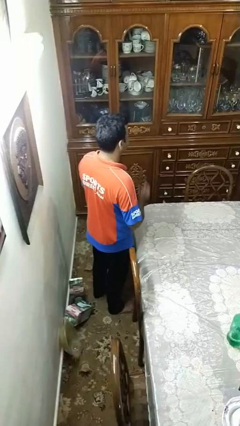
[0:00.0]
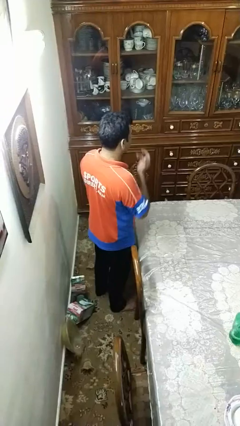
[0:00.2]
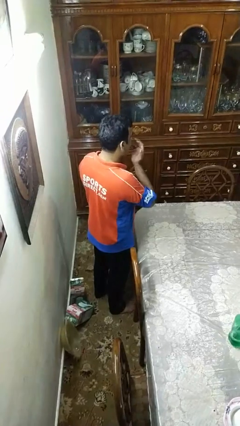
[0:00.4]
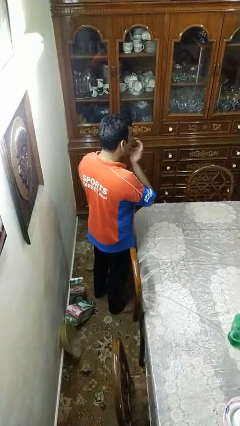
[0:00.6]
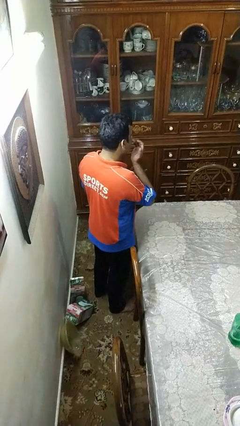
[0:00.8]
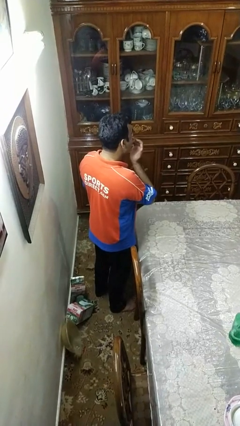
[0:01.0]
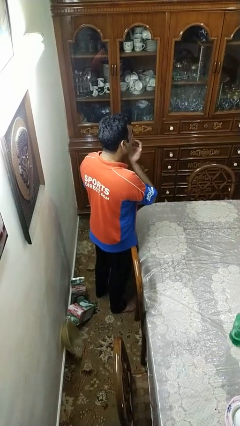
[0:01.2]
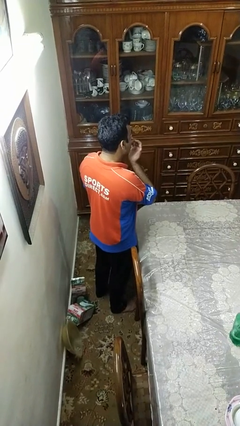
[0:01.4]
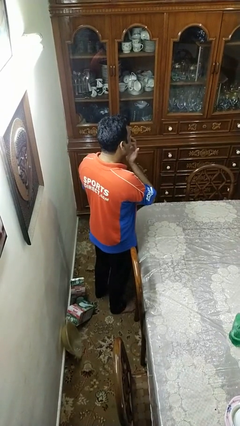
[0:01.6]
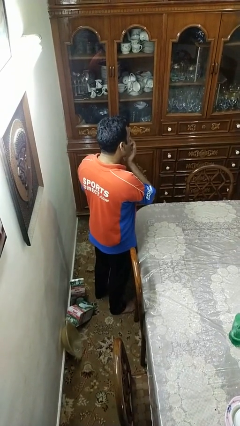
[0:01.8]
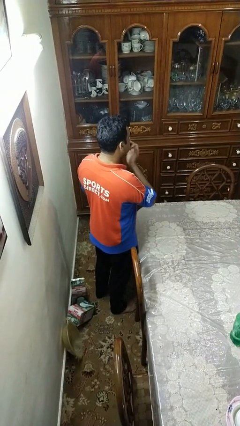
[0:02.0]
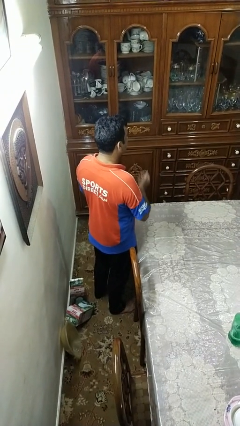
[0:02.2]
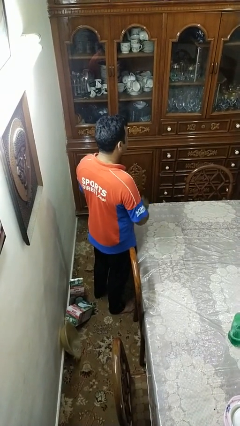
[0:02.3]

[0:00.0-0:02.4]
person licks fingers

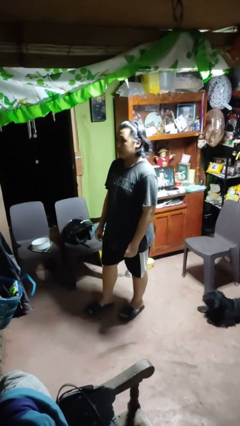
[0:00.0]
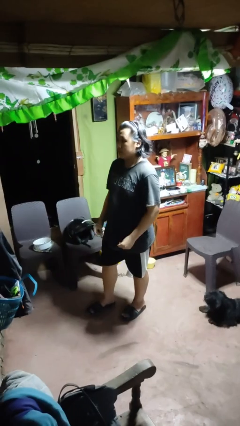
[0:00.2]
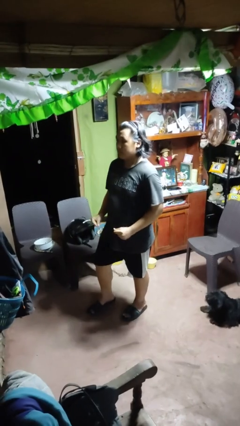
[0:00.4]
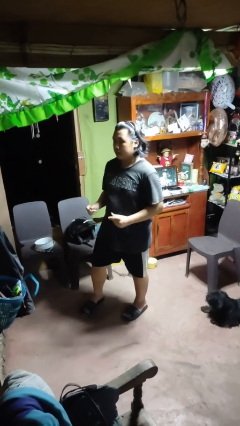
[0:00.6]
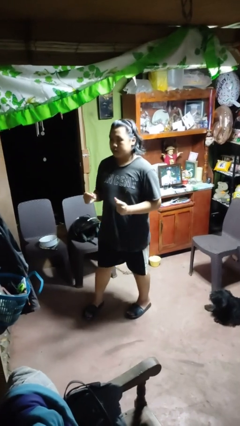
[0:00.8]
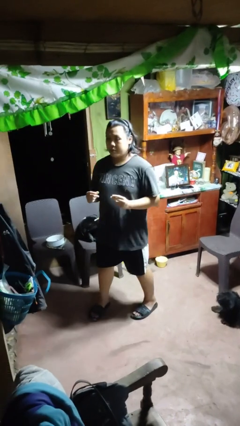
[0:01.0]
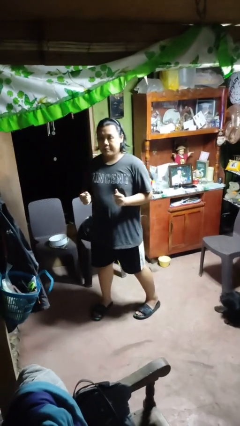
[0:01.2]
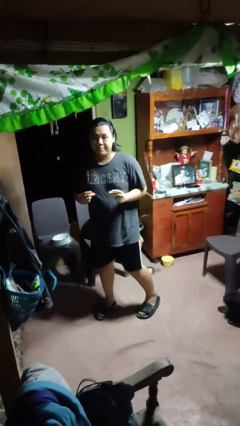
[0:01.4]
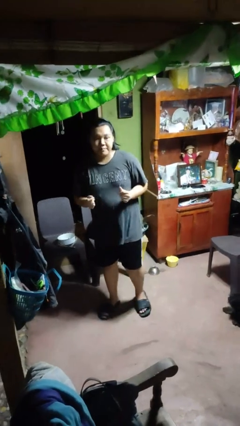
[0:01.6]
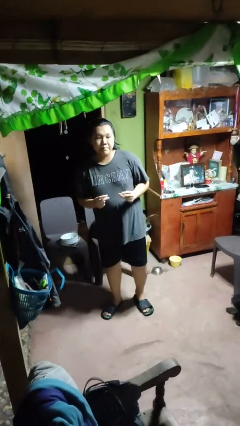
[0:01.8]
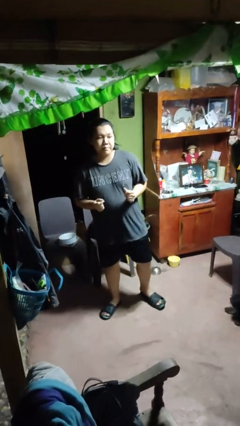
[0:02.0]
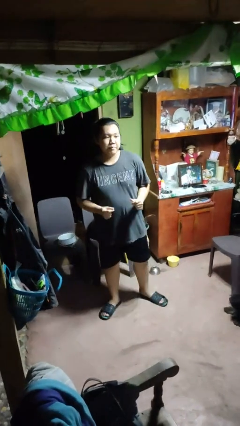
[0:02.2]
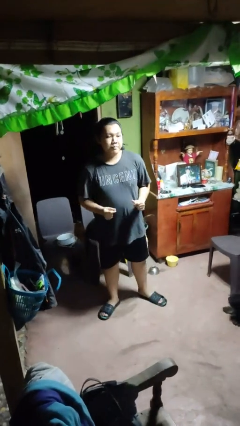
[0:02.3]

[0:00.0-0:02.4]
person snaps fingers

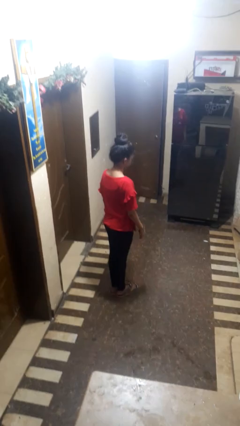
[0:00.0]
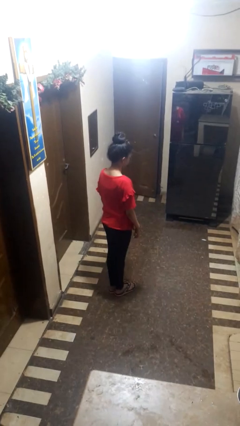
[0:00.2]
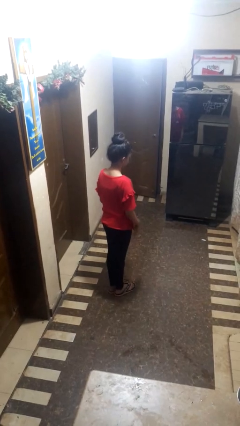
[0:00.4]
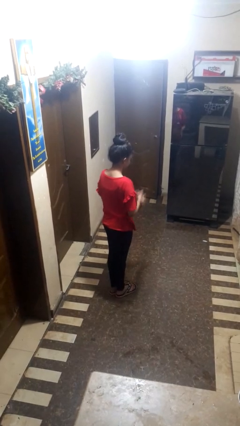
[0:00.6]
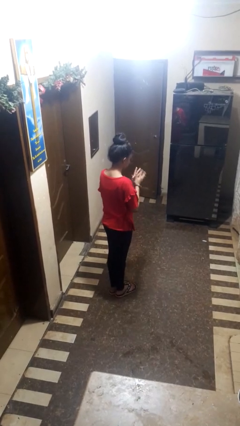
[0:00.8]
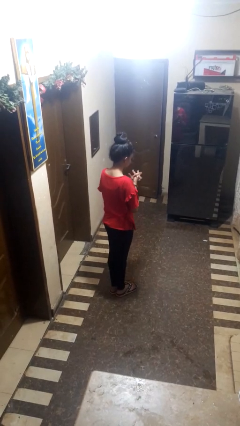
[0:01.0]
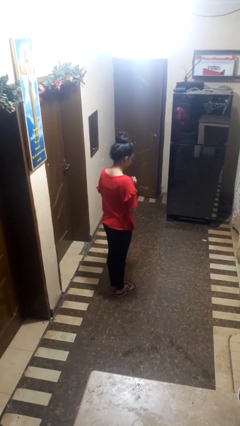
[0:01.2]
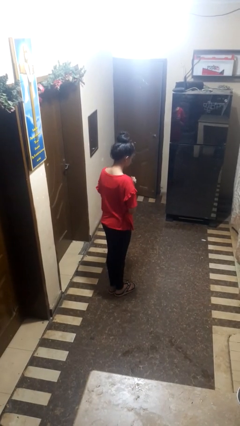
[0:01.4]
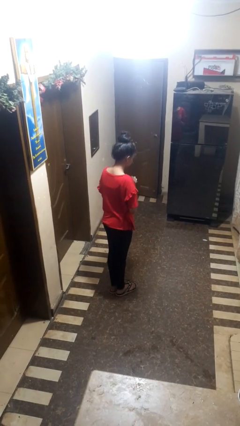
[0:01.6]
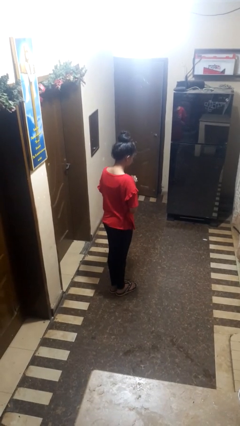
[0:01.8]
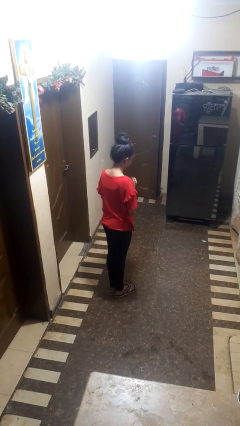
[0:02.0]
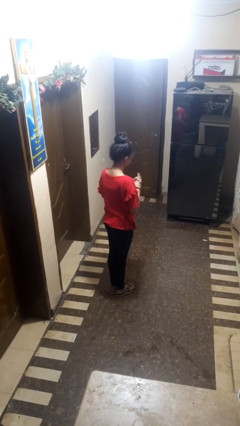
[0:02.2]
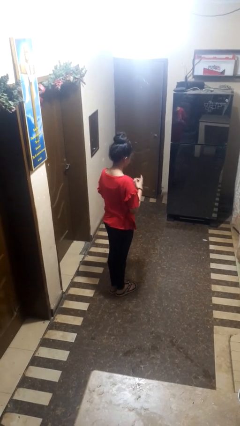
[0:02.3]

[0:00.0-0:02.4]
person prays

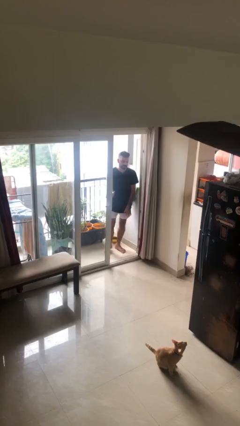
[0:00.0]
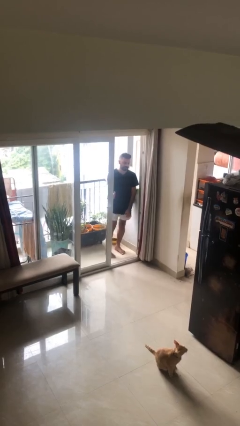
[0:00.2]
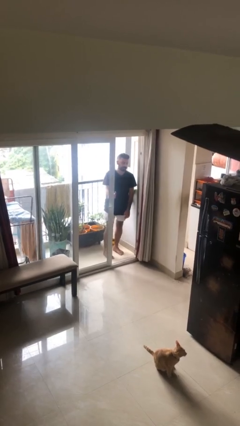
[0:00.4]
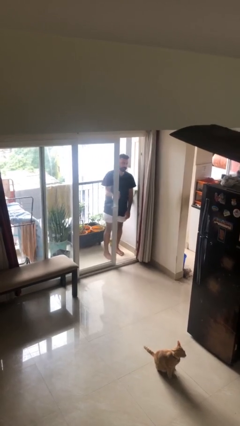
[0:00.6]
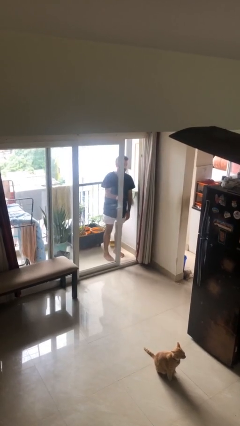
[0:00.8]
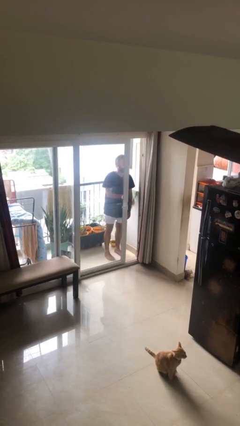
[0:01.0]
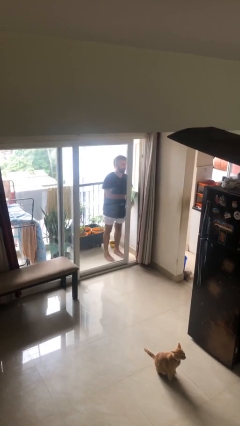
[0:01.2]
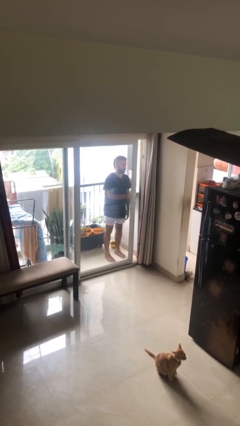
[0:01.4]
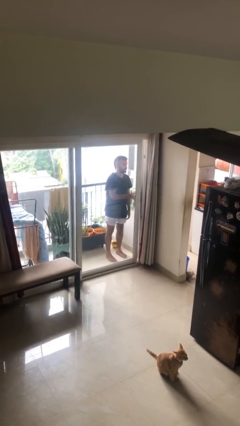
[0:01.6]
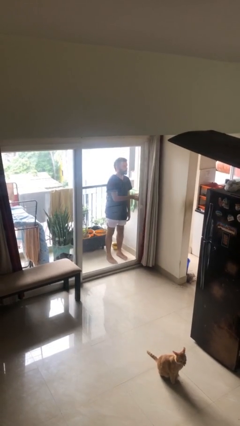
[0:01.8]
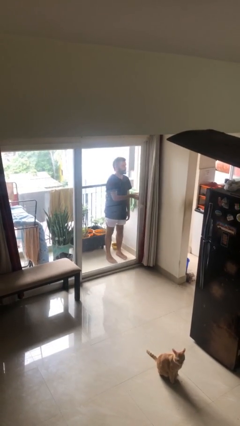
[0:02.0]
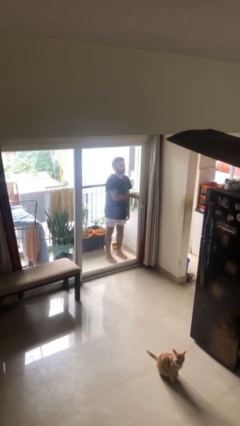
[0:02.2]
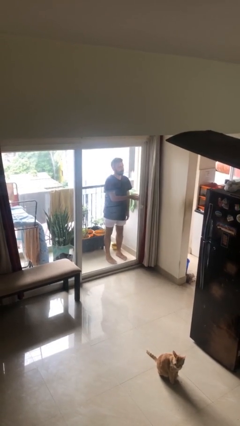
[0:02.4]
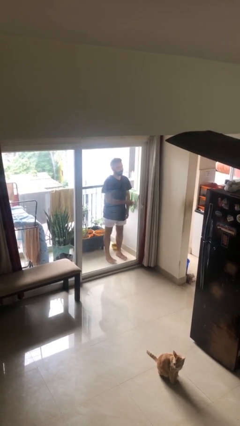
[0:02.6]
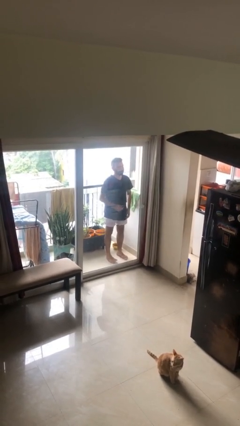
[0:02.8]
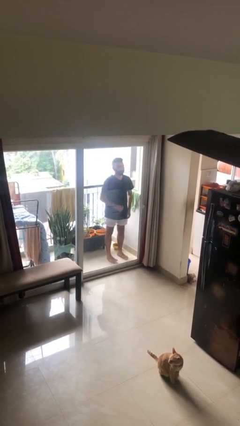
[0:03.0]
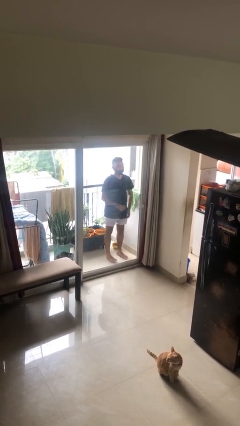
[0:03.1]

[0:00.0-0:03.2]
person closes facility door

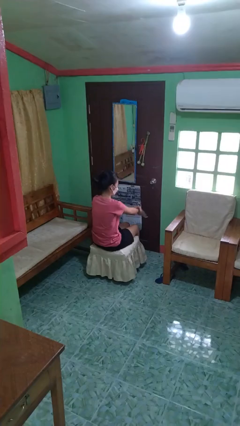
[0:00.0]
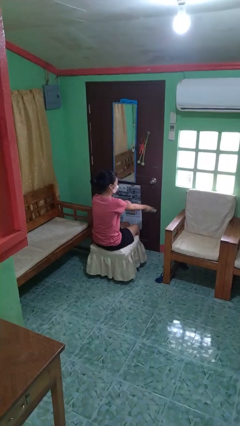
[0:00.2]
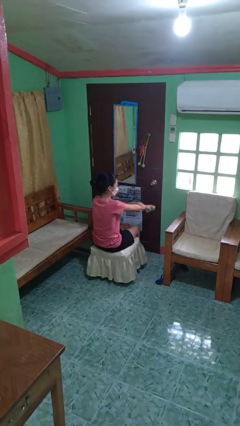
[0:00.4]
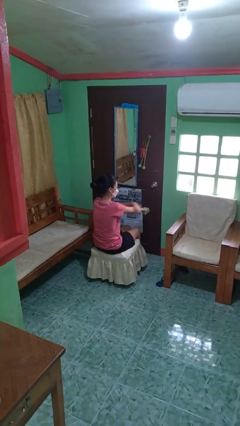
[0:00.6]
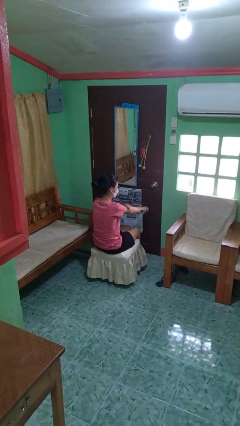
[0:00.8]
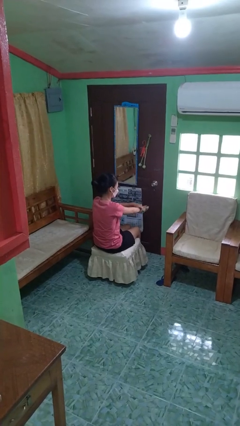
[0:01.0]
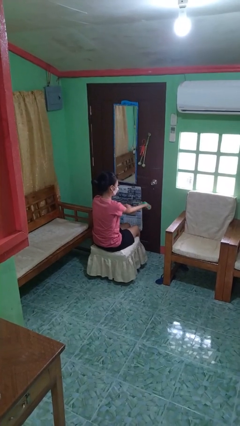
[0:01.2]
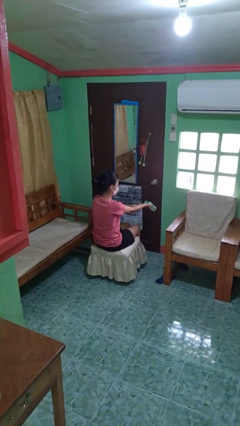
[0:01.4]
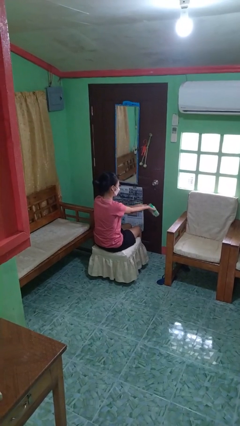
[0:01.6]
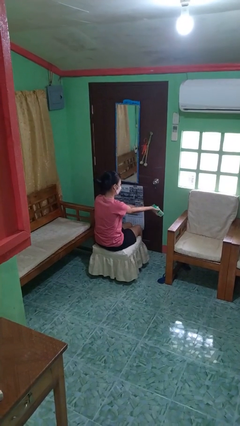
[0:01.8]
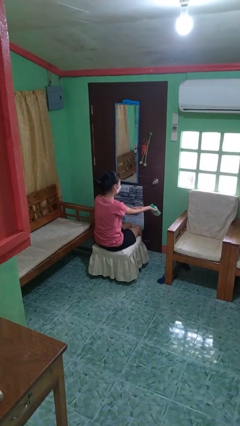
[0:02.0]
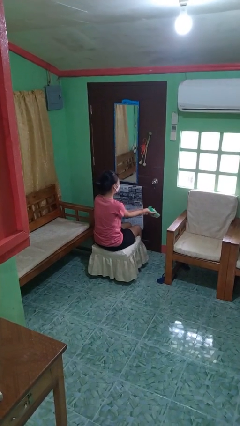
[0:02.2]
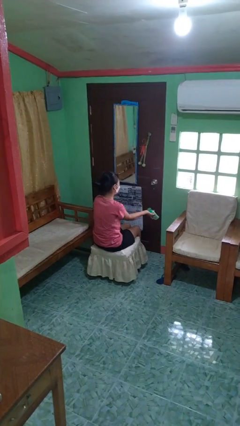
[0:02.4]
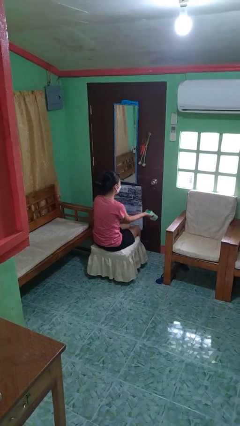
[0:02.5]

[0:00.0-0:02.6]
person applies sunscreen

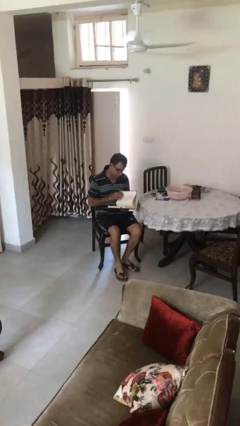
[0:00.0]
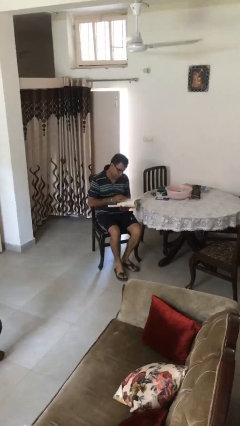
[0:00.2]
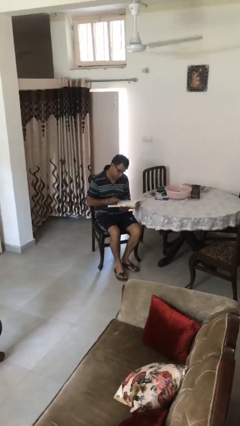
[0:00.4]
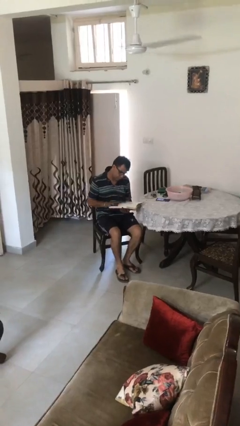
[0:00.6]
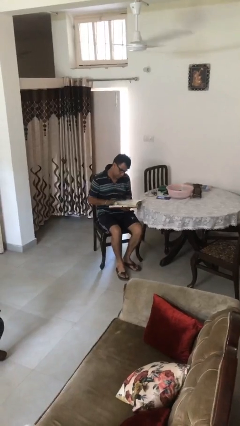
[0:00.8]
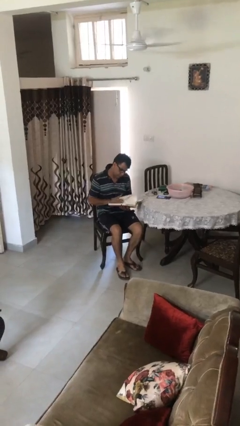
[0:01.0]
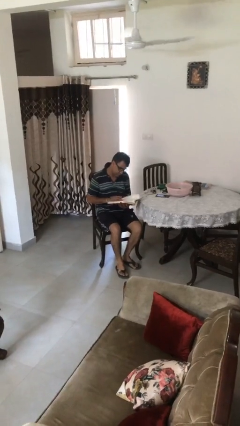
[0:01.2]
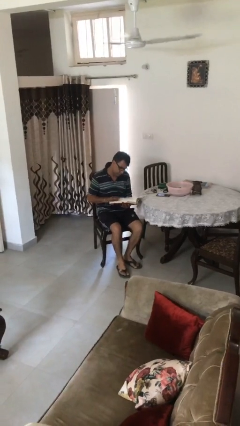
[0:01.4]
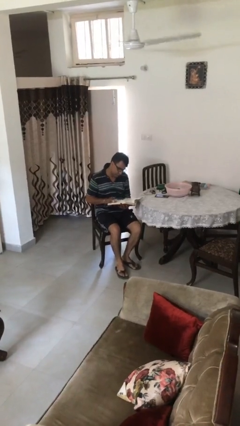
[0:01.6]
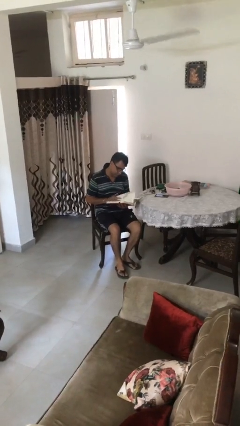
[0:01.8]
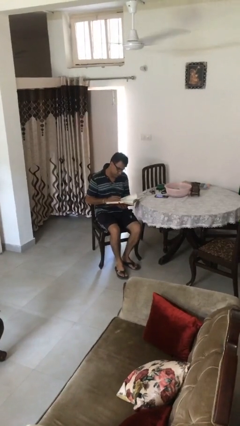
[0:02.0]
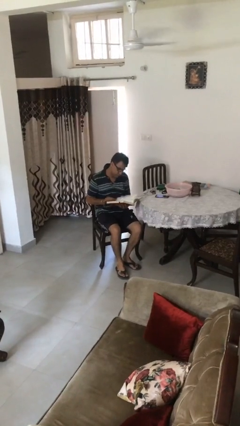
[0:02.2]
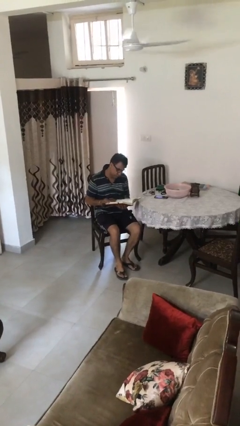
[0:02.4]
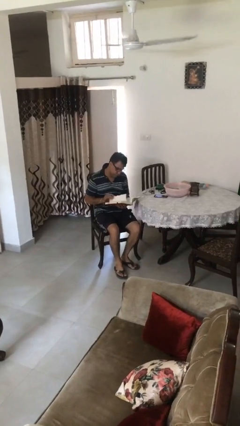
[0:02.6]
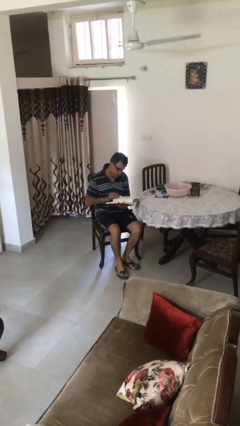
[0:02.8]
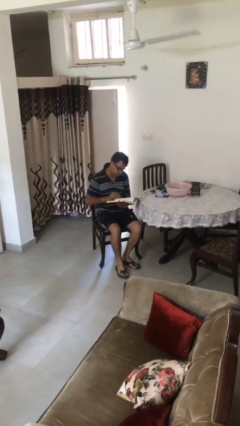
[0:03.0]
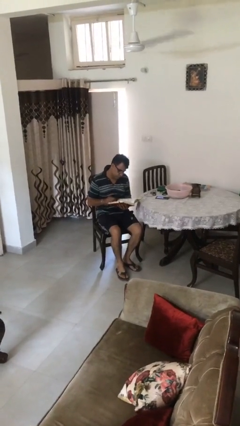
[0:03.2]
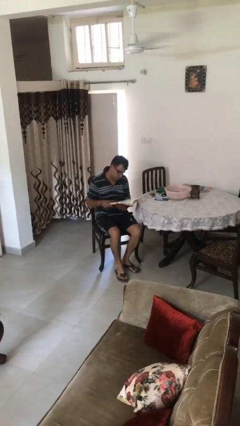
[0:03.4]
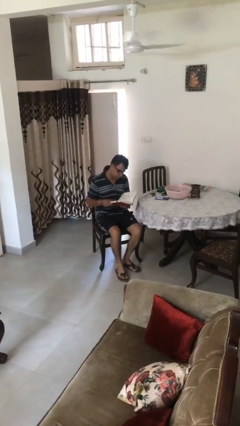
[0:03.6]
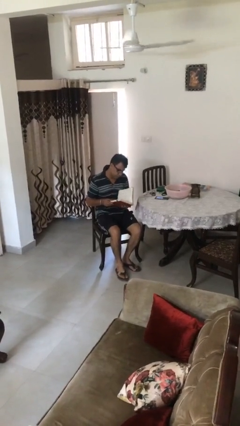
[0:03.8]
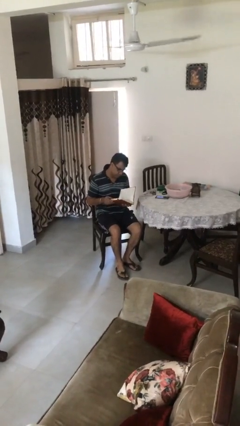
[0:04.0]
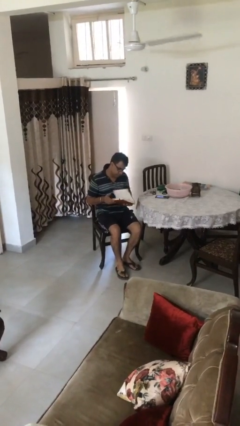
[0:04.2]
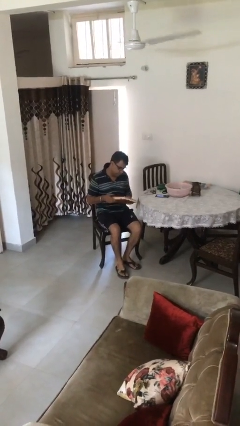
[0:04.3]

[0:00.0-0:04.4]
person reads document
